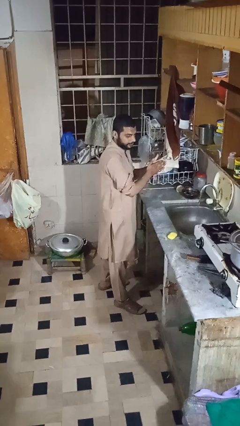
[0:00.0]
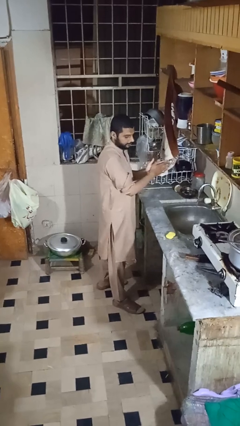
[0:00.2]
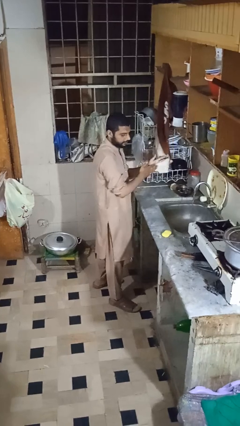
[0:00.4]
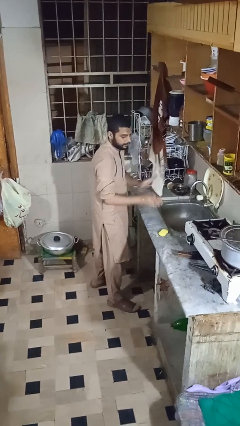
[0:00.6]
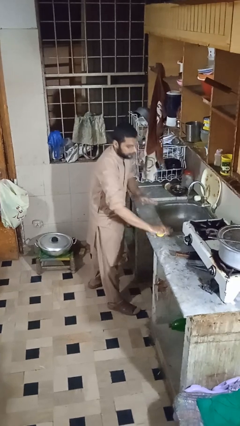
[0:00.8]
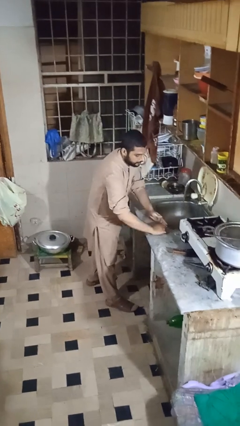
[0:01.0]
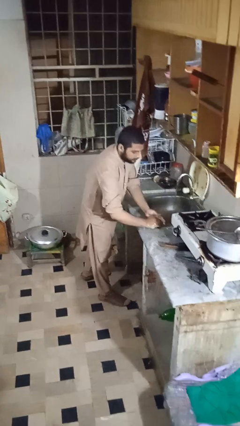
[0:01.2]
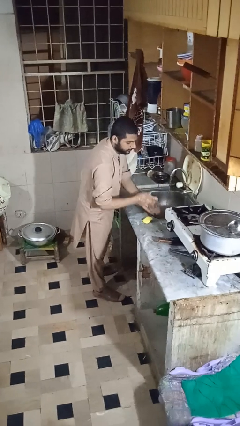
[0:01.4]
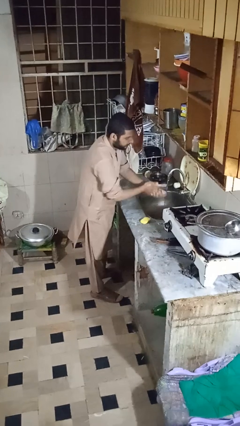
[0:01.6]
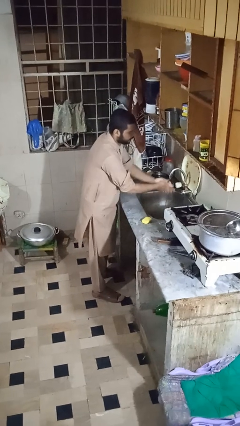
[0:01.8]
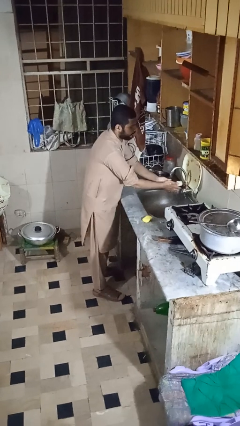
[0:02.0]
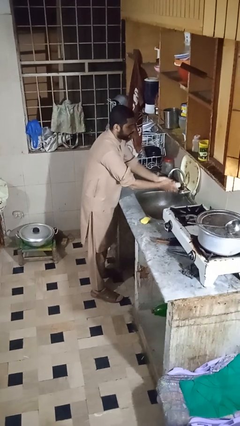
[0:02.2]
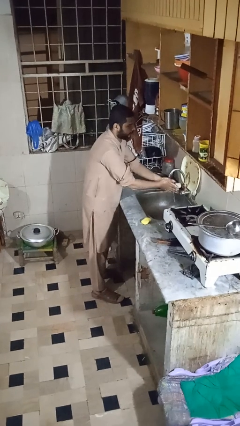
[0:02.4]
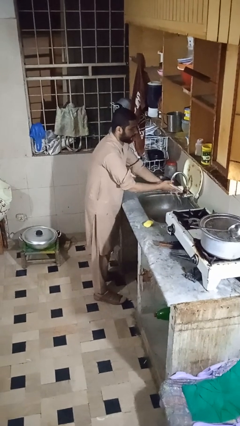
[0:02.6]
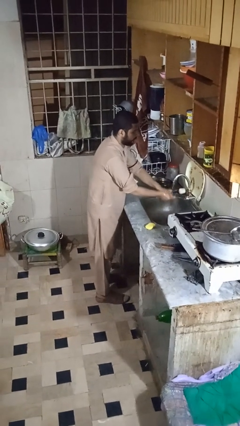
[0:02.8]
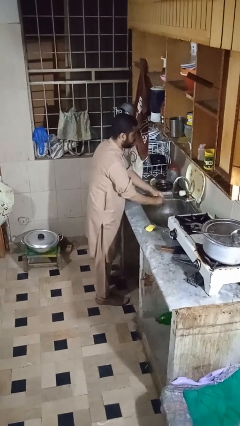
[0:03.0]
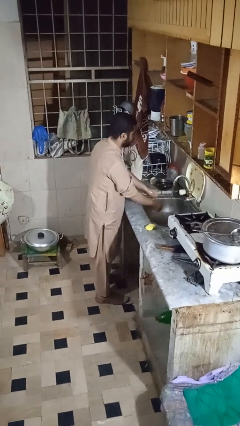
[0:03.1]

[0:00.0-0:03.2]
person washes hands

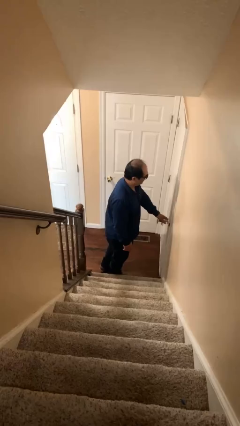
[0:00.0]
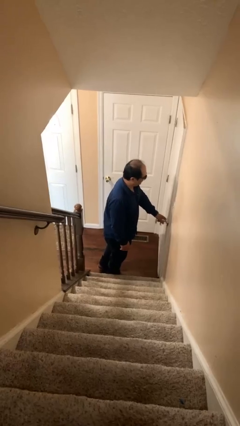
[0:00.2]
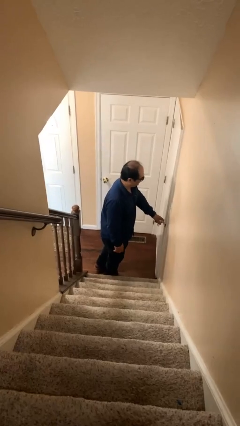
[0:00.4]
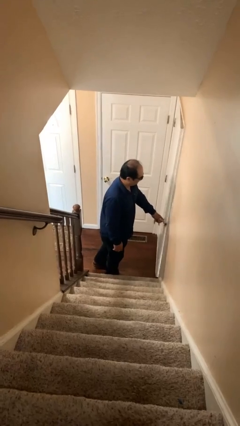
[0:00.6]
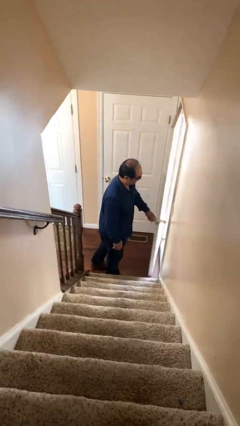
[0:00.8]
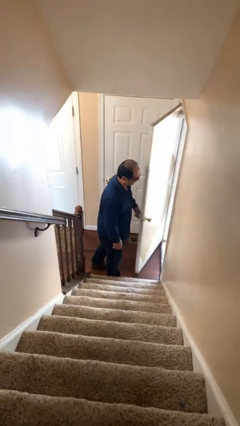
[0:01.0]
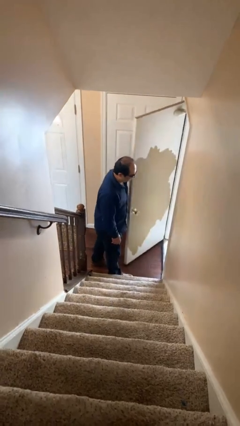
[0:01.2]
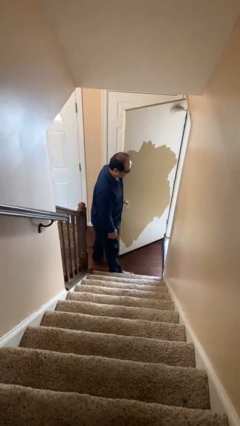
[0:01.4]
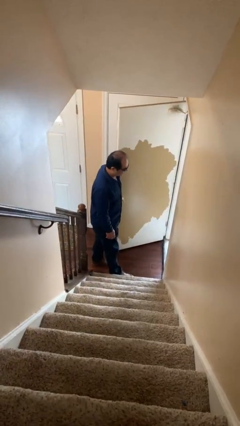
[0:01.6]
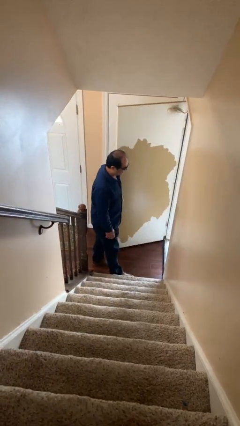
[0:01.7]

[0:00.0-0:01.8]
person opens facility door

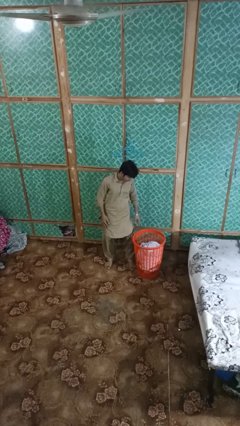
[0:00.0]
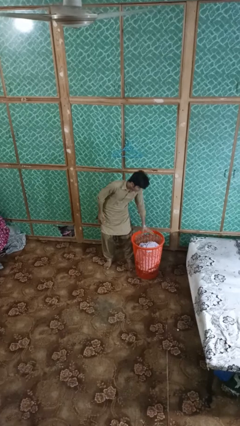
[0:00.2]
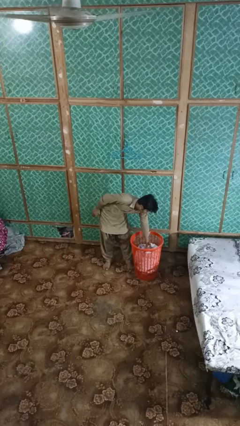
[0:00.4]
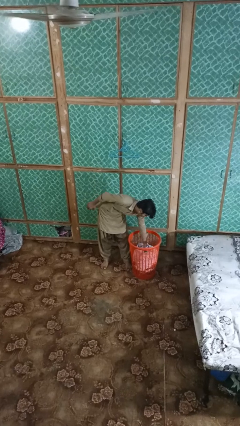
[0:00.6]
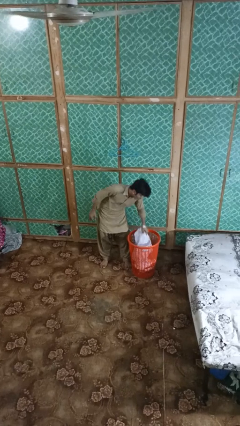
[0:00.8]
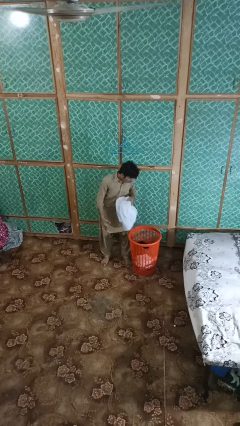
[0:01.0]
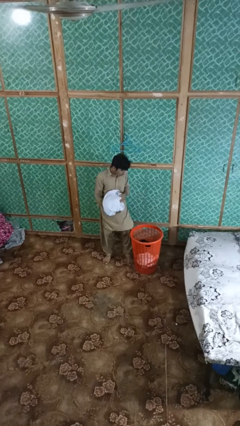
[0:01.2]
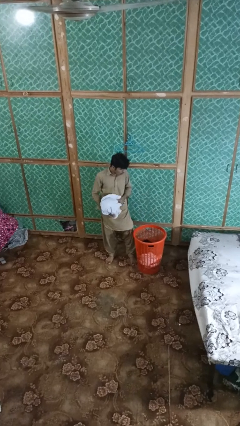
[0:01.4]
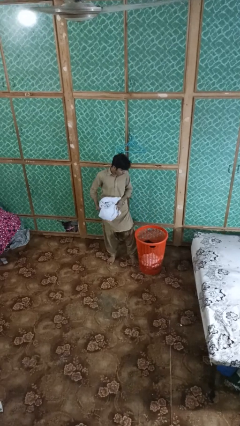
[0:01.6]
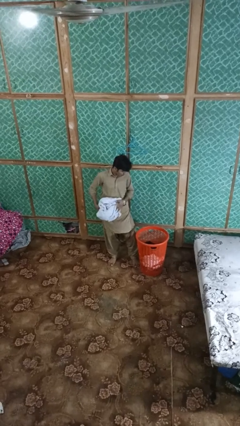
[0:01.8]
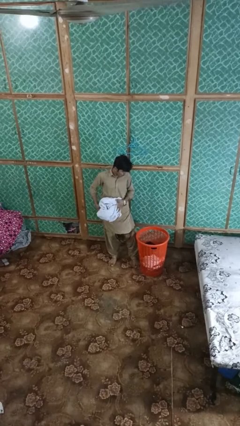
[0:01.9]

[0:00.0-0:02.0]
person takes object from basket

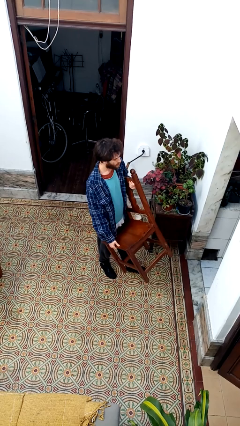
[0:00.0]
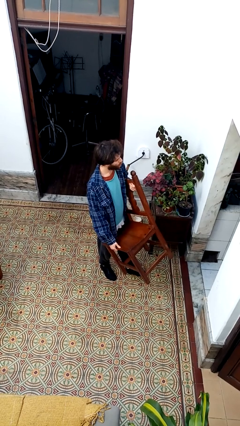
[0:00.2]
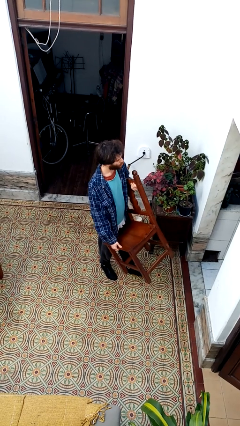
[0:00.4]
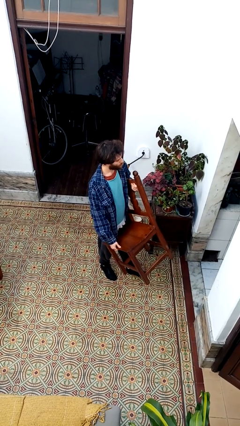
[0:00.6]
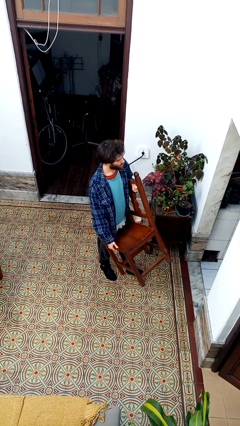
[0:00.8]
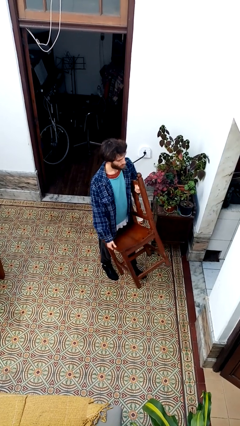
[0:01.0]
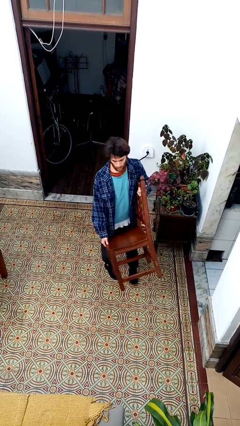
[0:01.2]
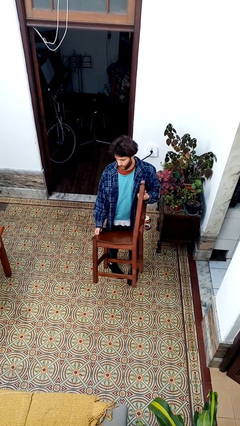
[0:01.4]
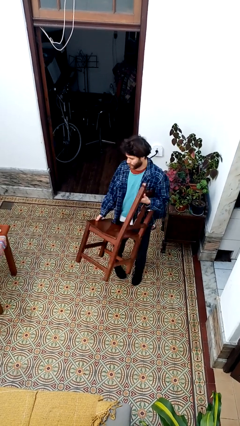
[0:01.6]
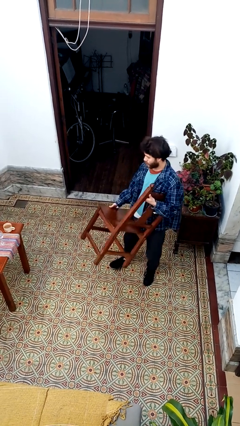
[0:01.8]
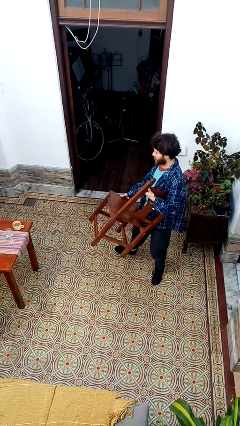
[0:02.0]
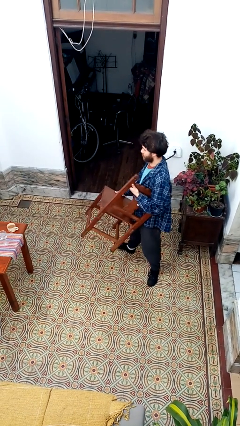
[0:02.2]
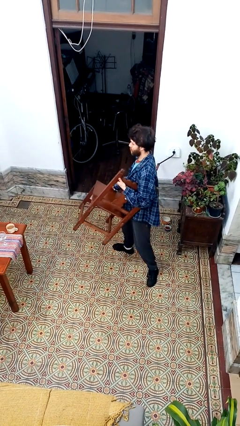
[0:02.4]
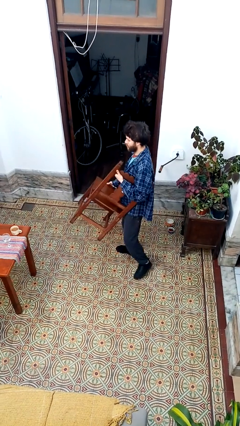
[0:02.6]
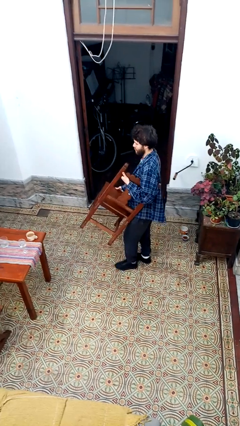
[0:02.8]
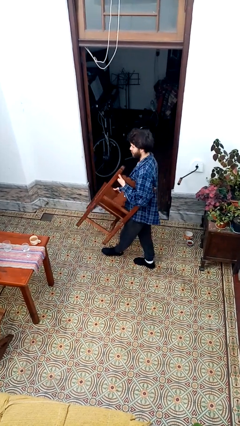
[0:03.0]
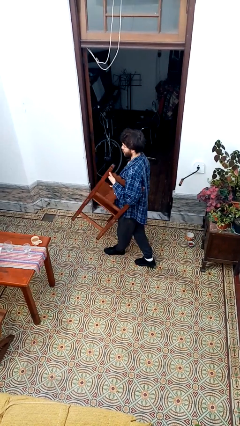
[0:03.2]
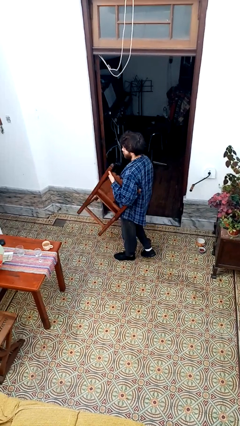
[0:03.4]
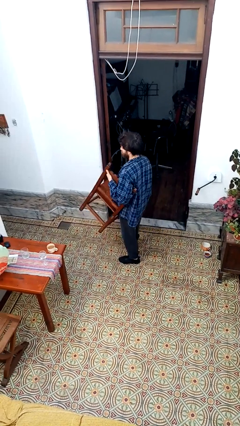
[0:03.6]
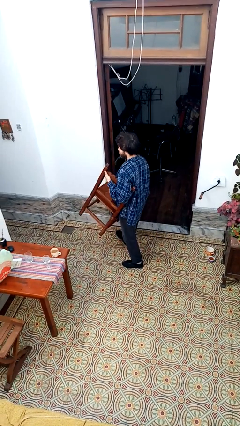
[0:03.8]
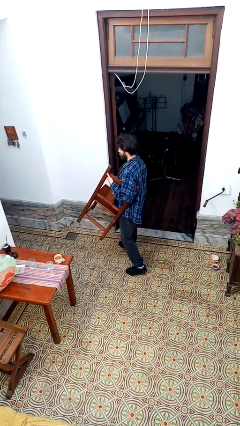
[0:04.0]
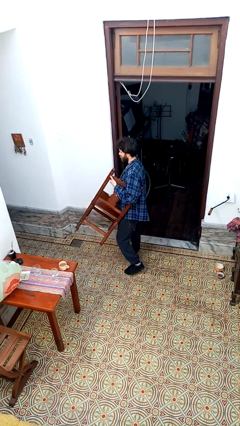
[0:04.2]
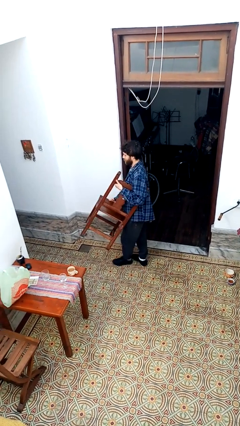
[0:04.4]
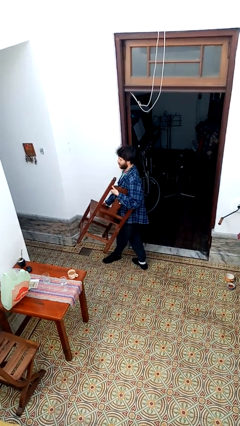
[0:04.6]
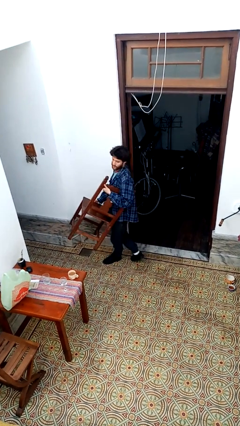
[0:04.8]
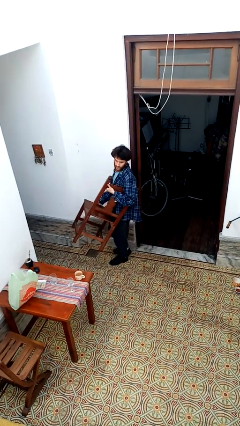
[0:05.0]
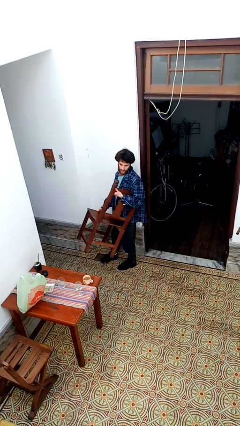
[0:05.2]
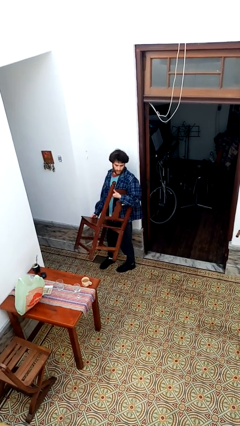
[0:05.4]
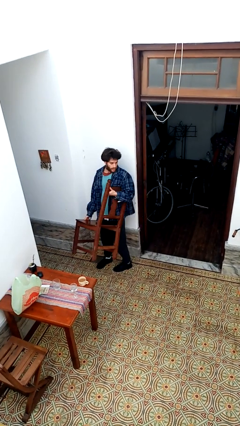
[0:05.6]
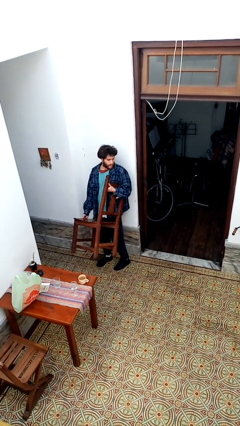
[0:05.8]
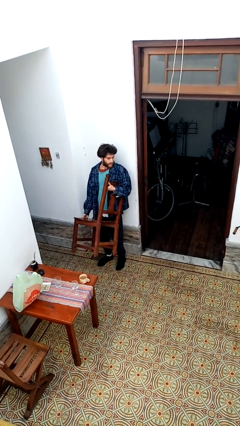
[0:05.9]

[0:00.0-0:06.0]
person carries furniture

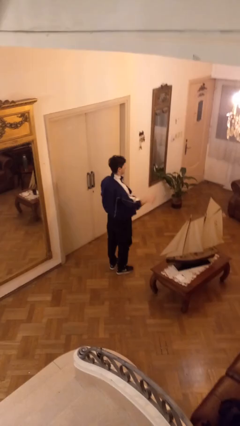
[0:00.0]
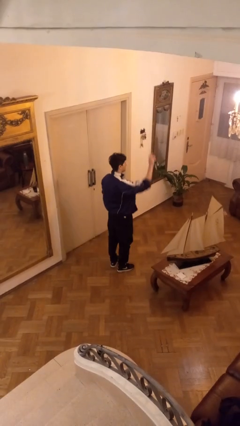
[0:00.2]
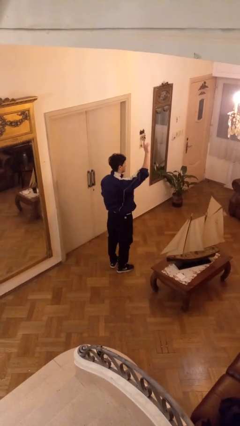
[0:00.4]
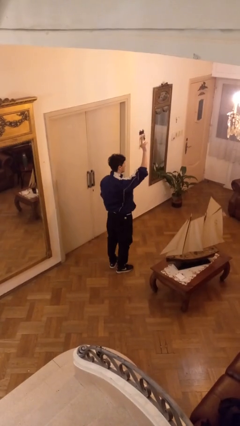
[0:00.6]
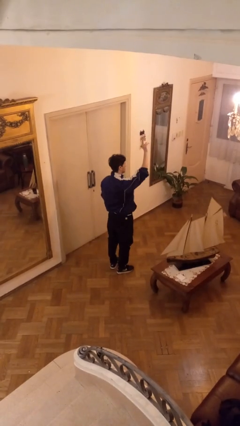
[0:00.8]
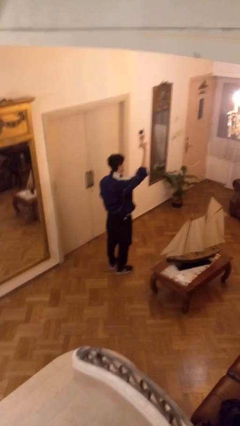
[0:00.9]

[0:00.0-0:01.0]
person gestures raise hand

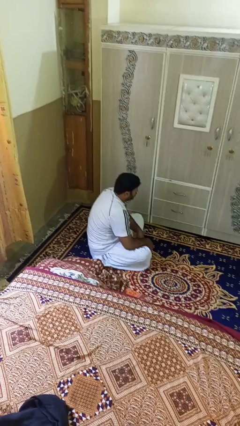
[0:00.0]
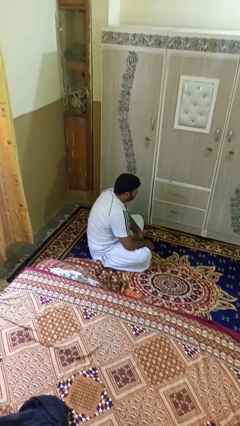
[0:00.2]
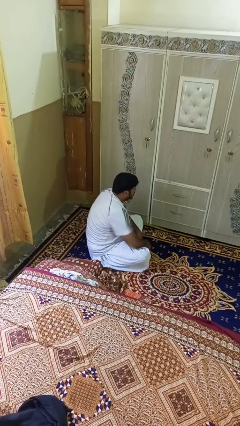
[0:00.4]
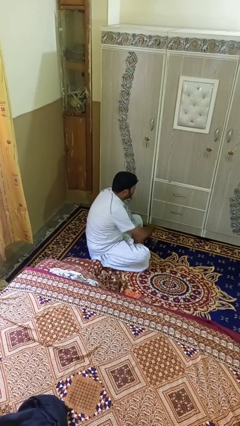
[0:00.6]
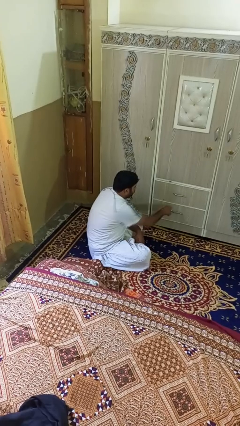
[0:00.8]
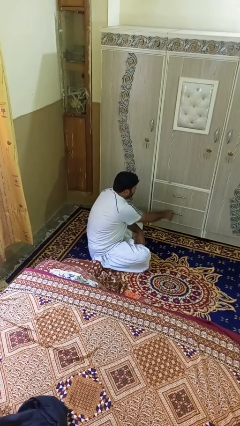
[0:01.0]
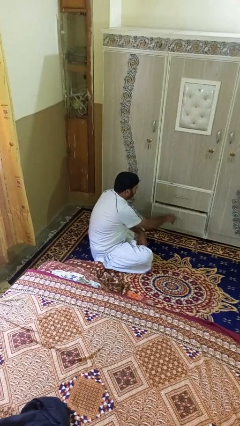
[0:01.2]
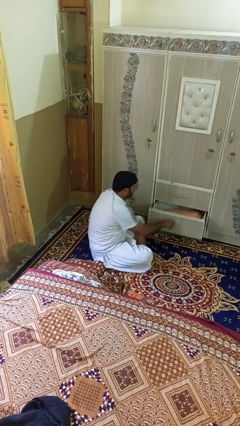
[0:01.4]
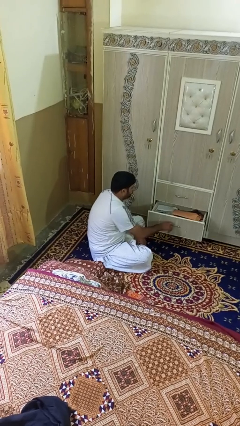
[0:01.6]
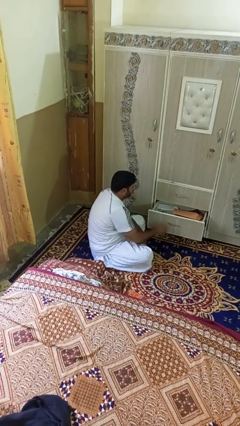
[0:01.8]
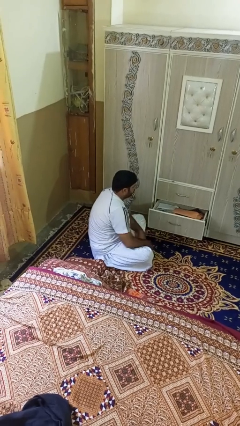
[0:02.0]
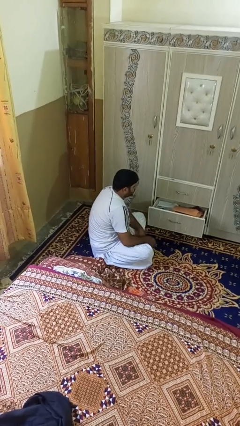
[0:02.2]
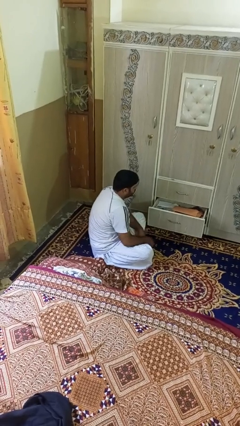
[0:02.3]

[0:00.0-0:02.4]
person opens dresser drawer

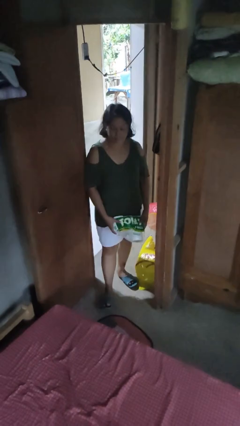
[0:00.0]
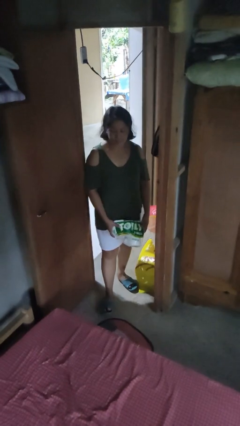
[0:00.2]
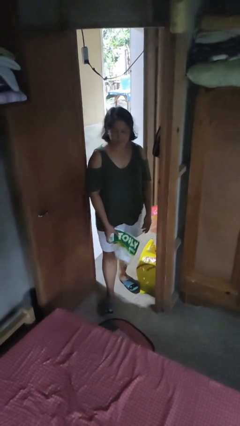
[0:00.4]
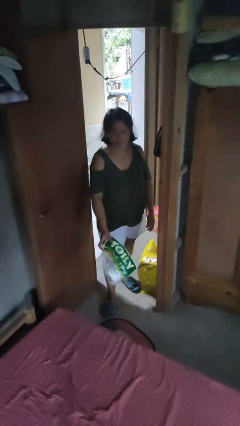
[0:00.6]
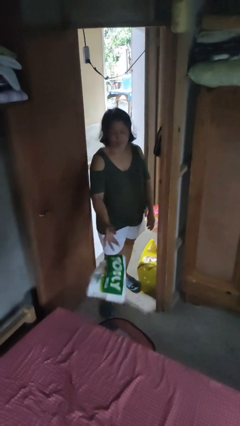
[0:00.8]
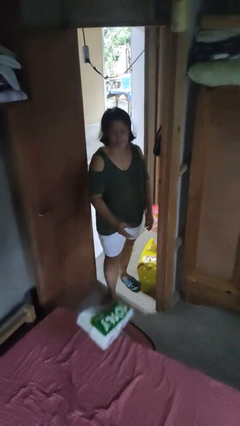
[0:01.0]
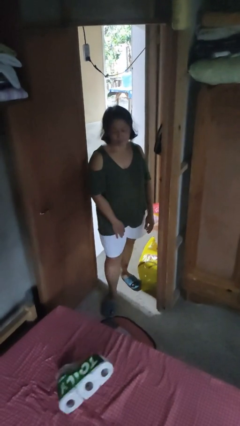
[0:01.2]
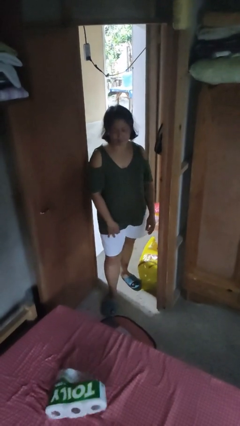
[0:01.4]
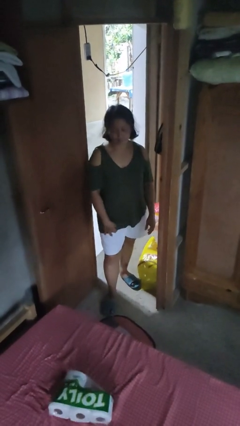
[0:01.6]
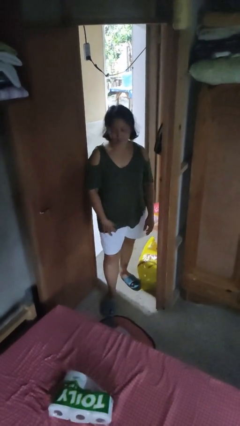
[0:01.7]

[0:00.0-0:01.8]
person throws object on bed
